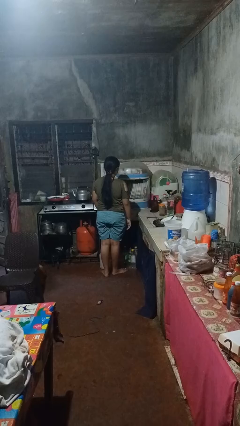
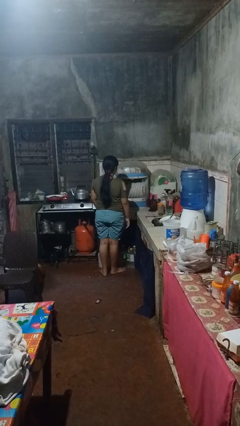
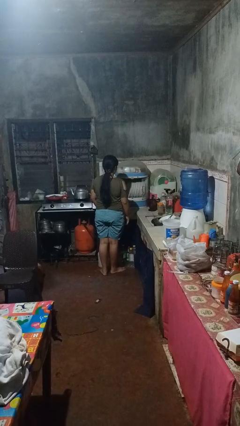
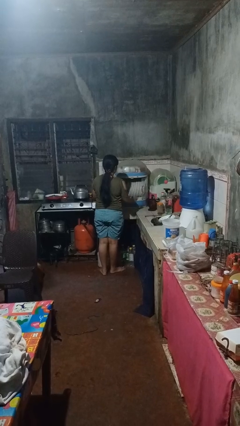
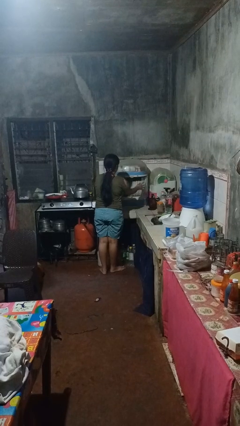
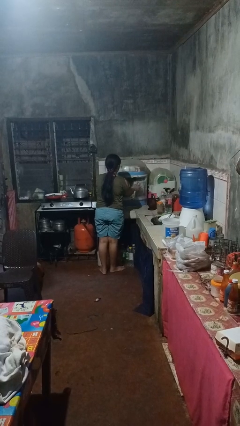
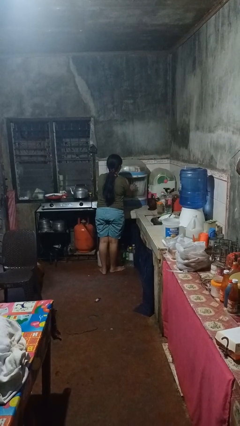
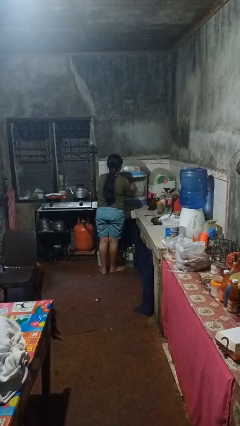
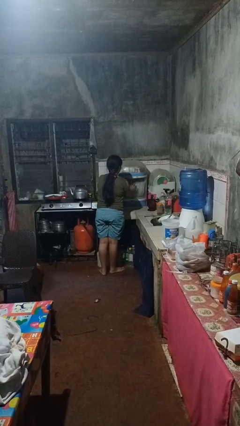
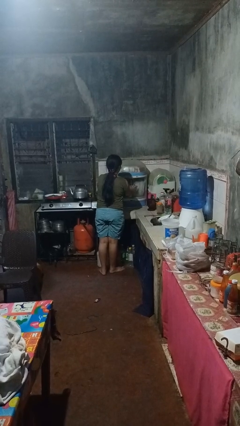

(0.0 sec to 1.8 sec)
person closes kitchen drawer

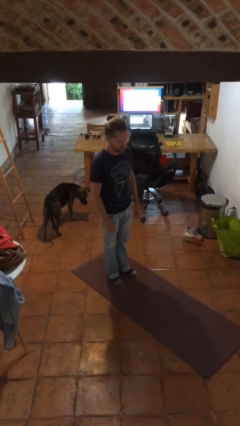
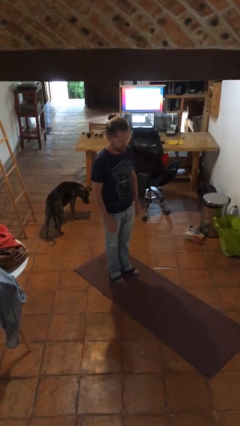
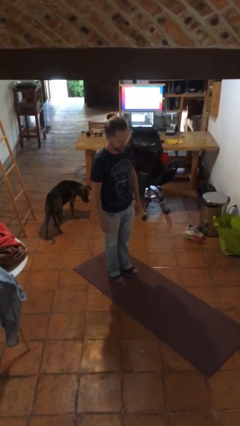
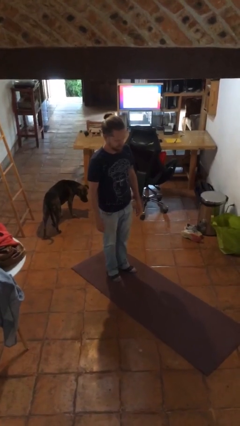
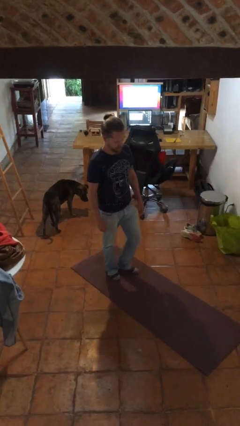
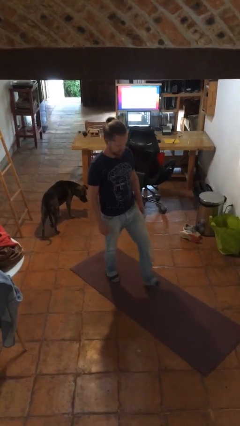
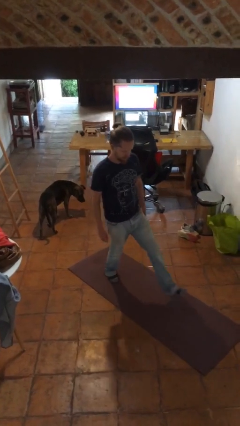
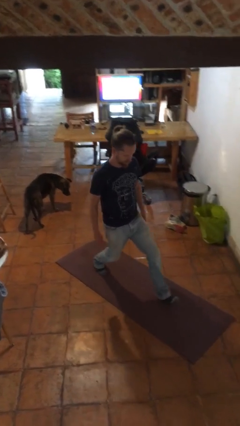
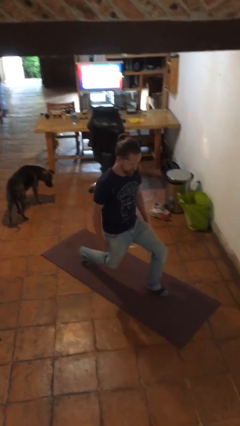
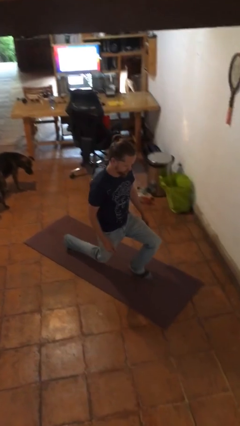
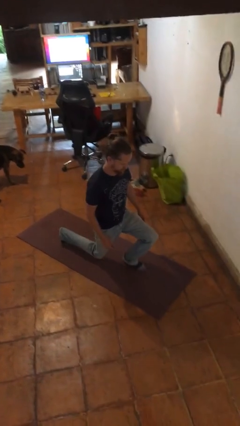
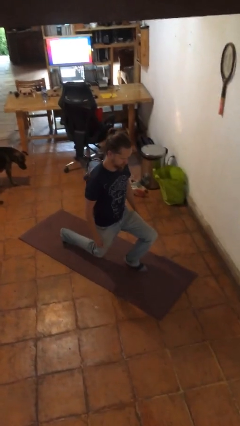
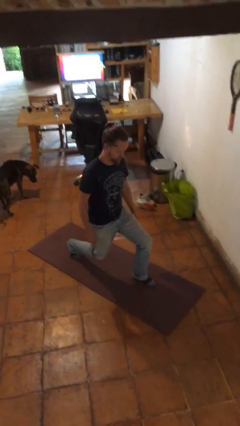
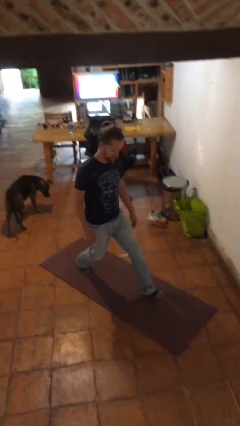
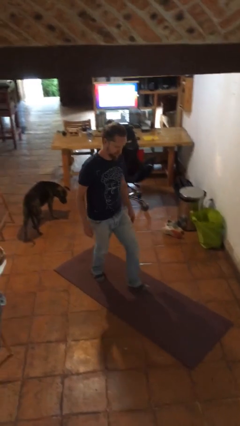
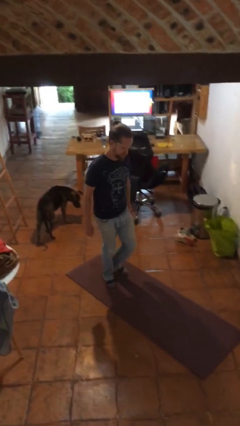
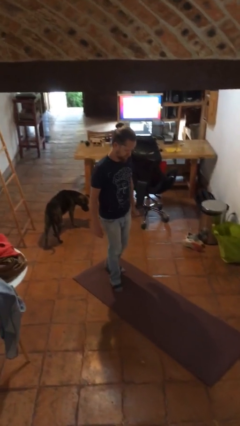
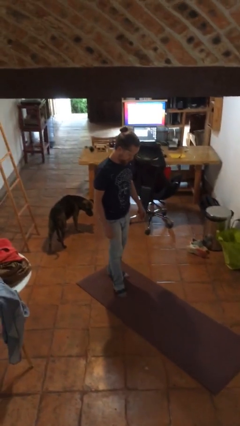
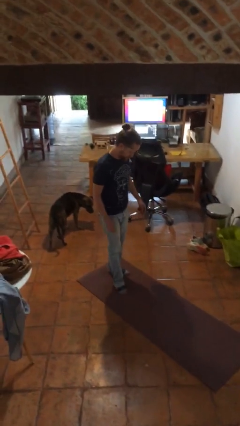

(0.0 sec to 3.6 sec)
person exercises with lunges

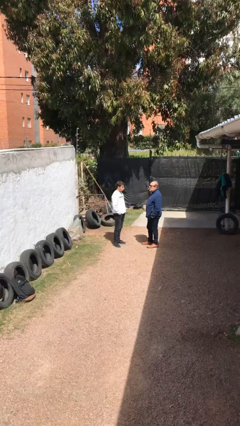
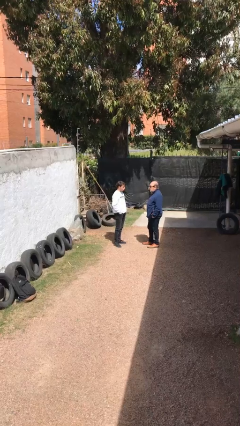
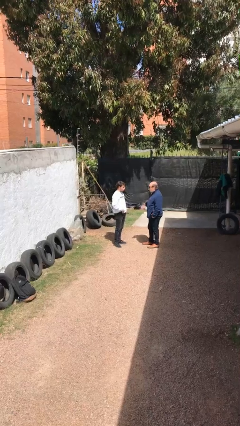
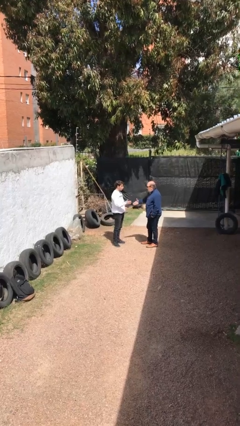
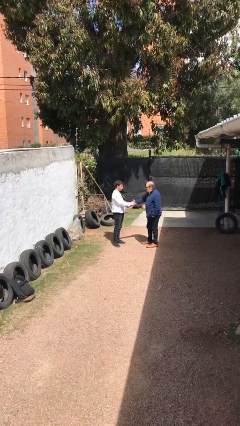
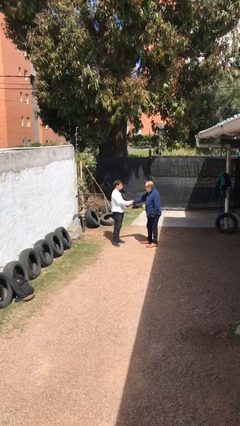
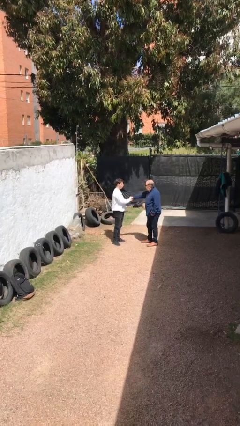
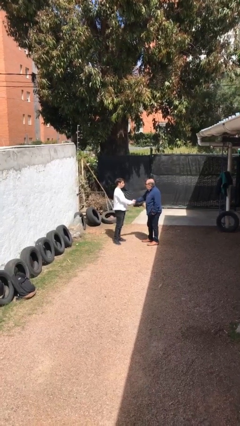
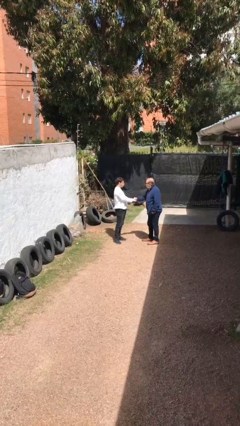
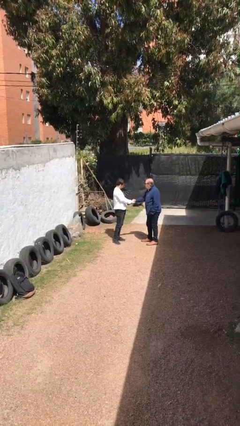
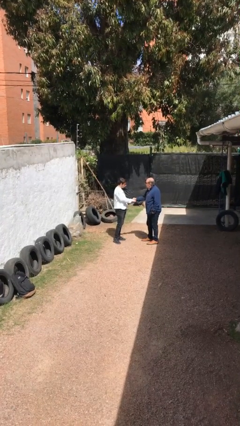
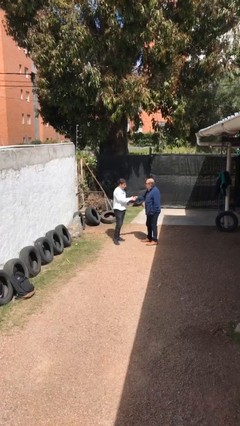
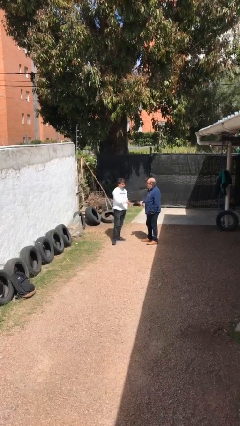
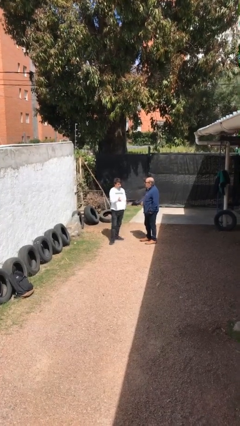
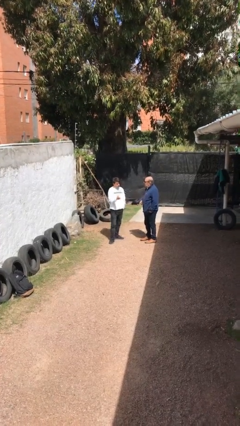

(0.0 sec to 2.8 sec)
person shakes hand

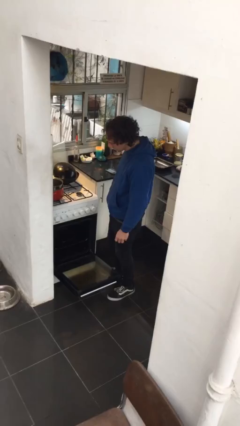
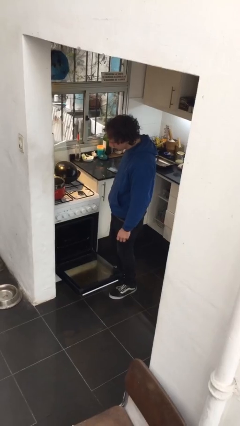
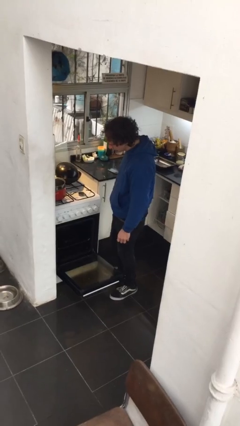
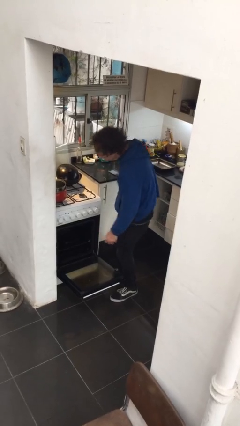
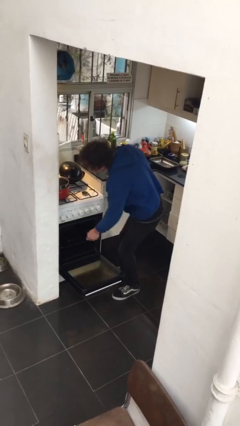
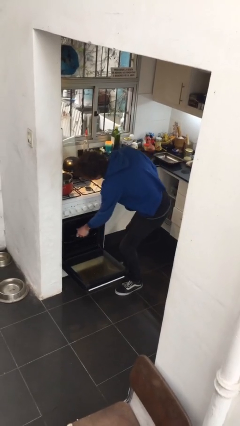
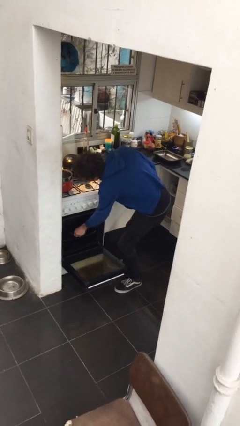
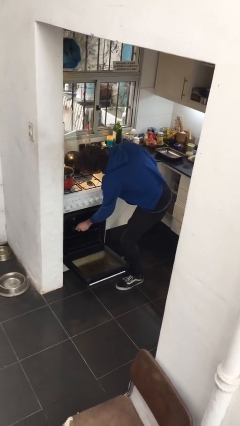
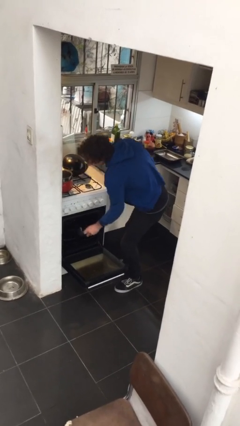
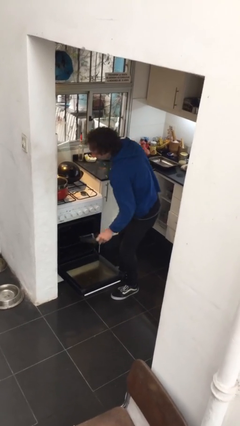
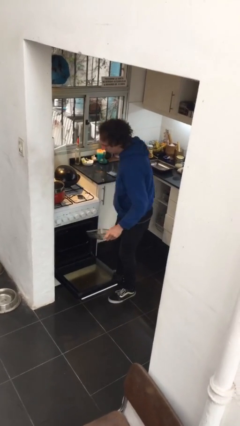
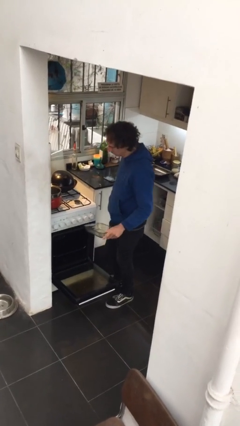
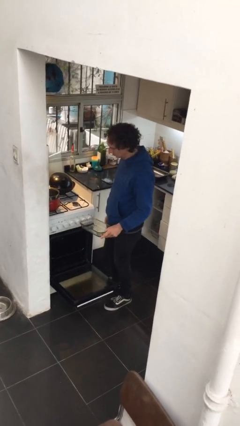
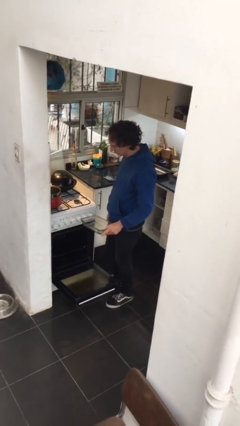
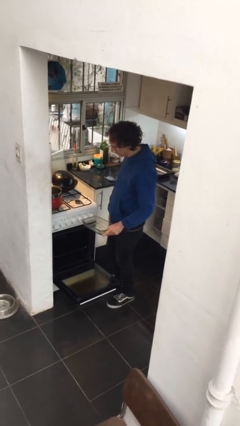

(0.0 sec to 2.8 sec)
person takes object from oven

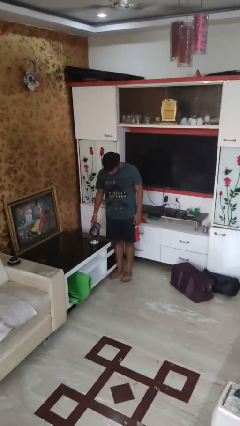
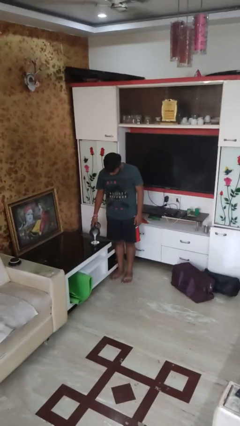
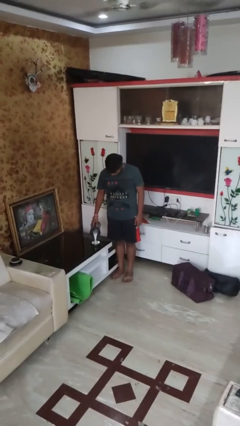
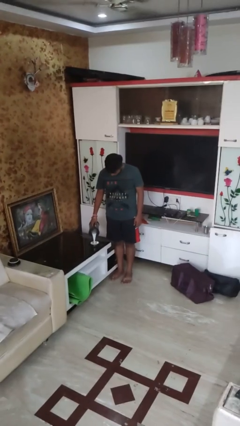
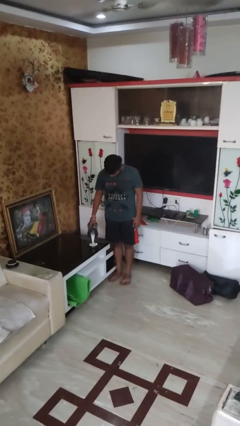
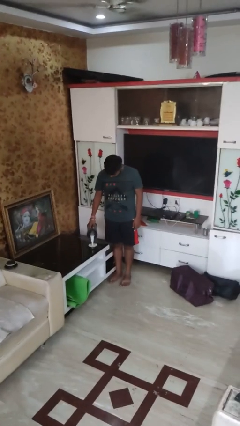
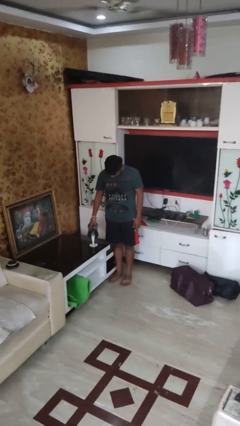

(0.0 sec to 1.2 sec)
person pours into bowl

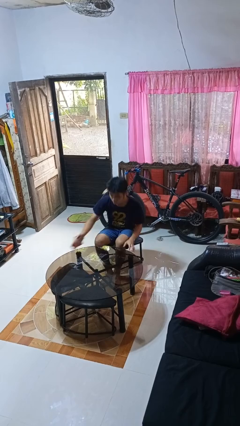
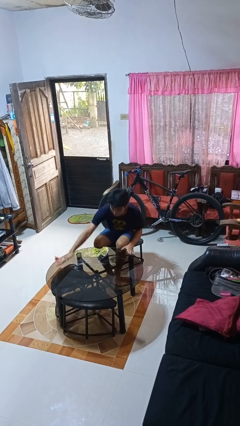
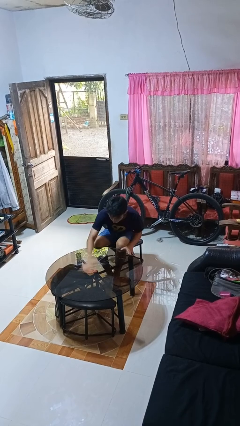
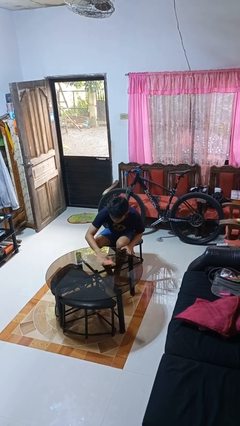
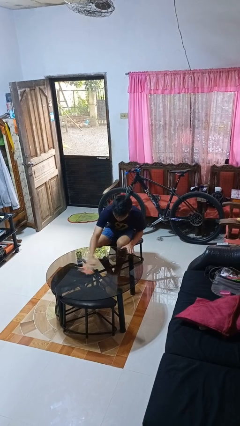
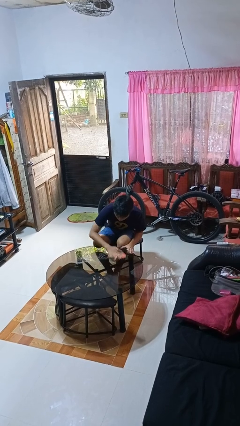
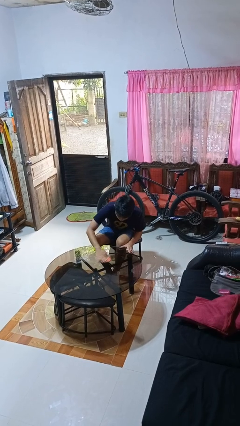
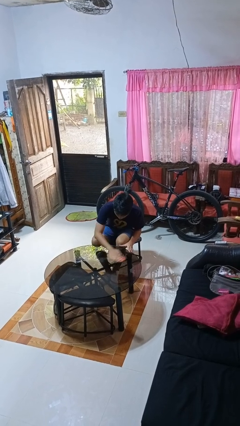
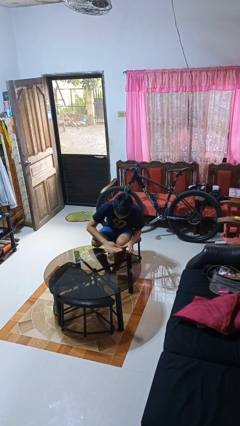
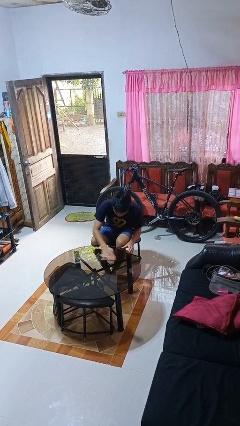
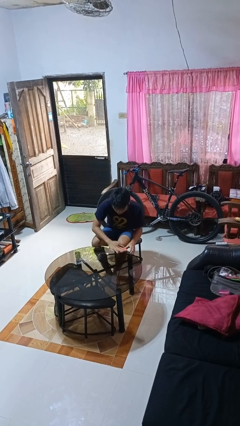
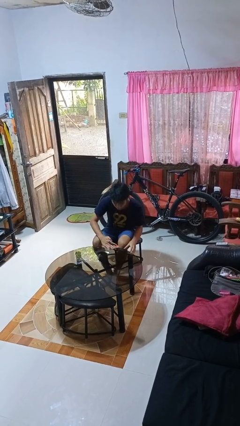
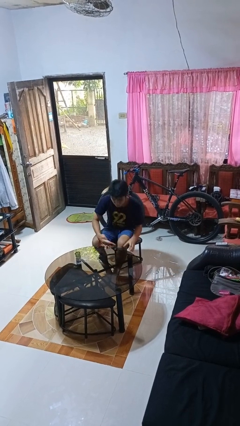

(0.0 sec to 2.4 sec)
person cleans table with rag

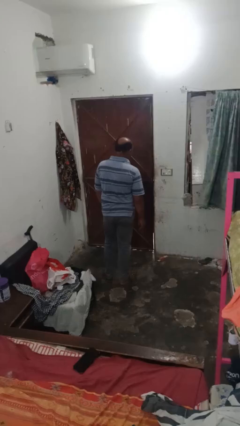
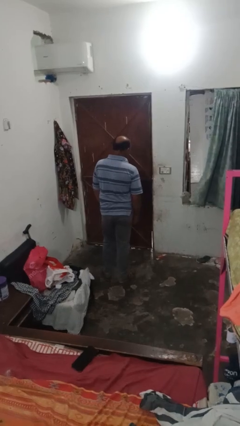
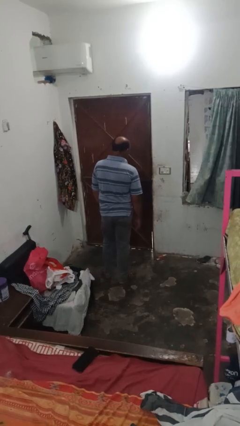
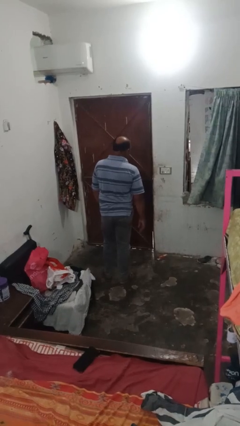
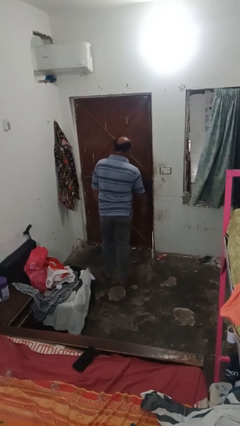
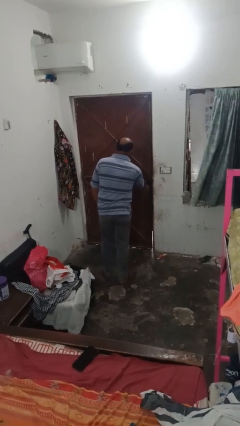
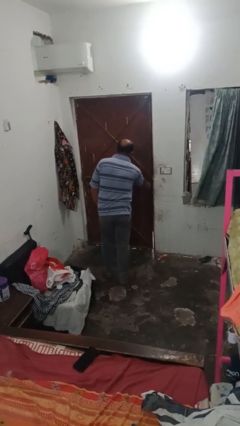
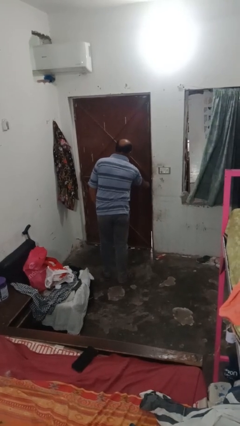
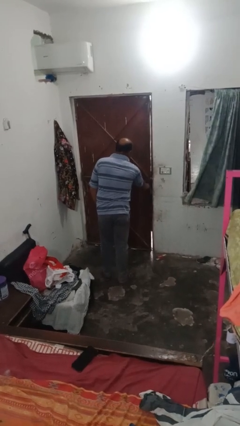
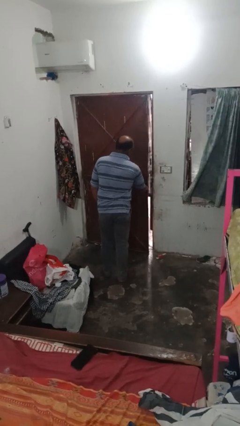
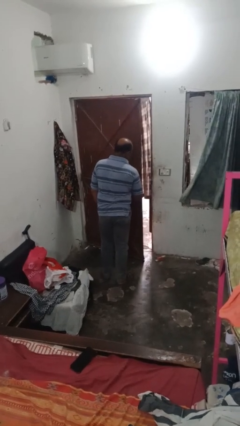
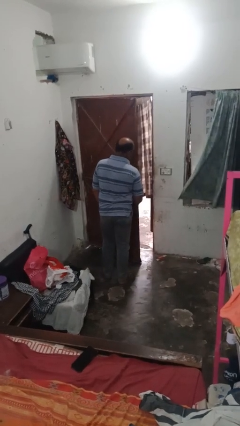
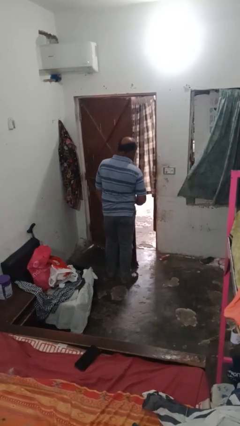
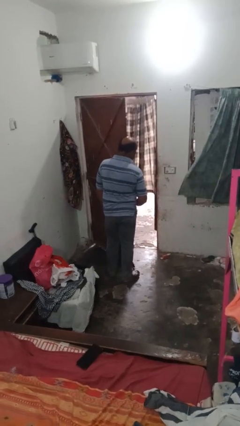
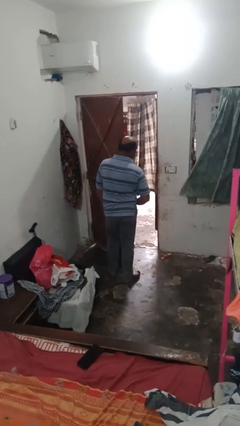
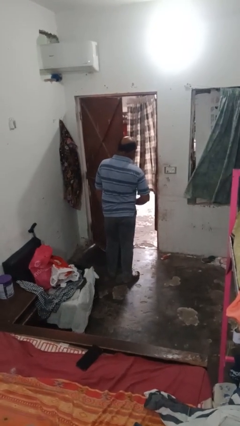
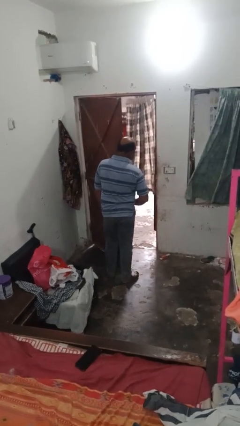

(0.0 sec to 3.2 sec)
person opens closet door
